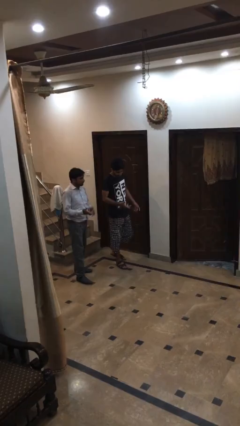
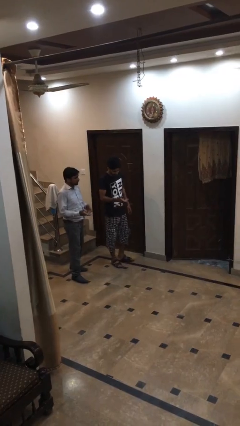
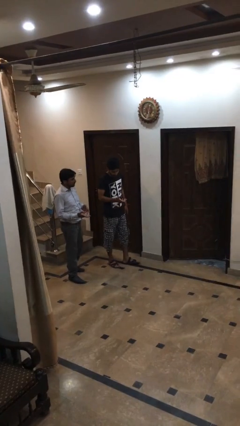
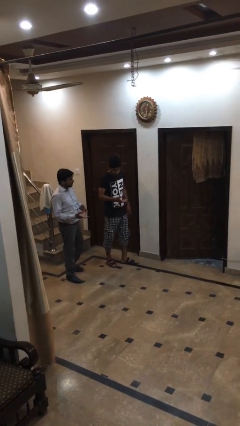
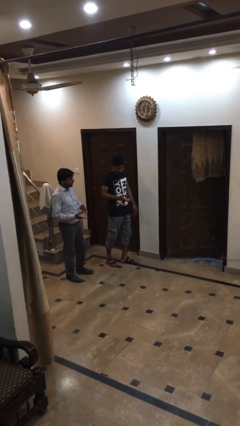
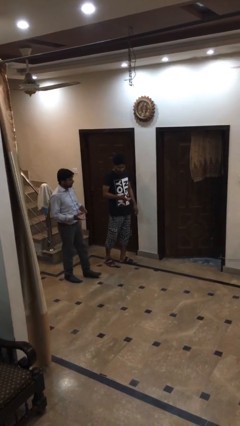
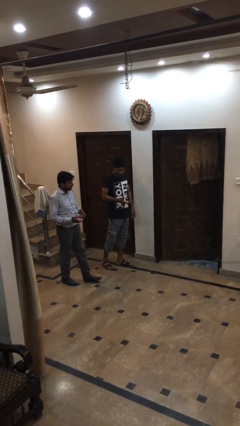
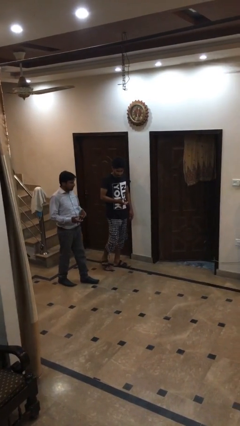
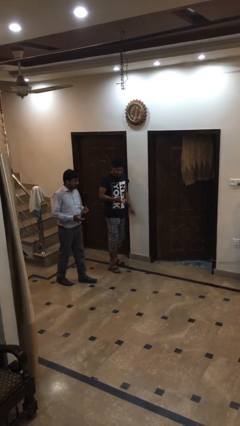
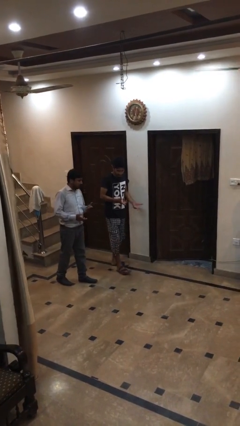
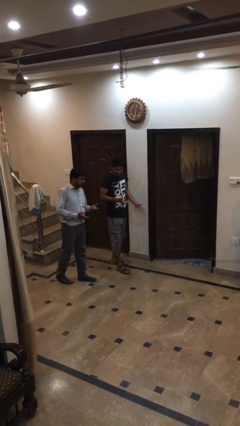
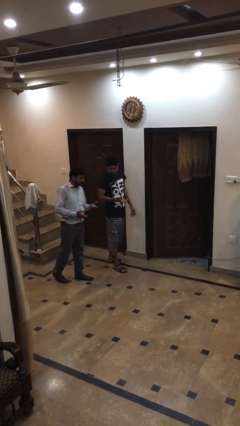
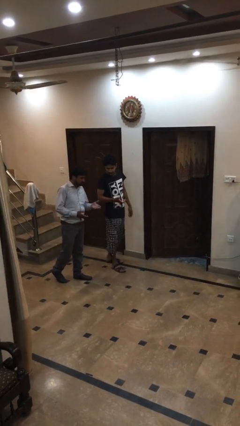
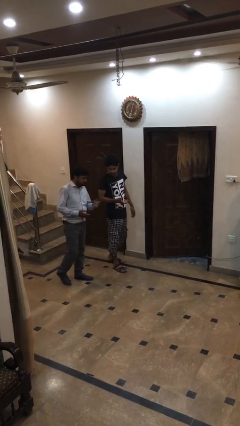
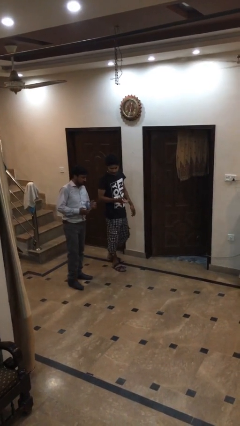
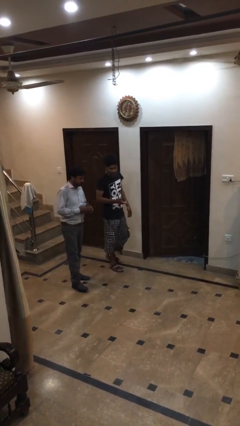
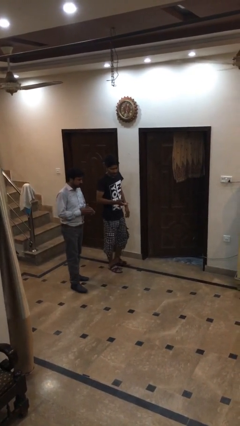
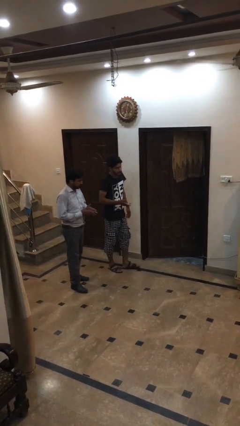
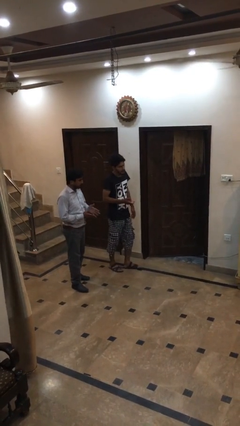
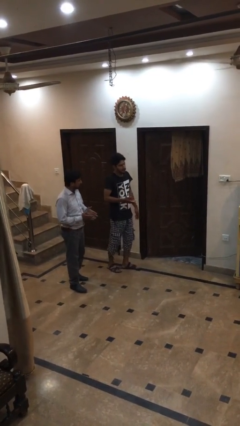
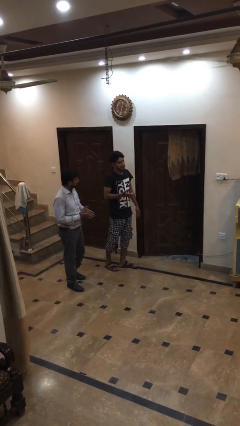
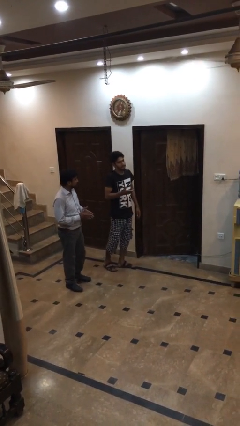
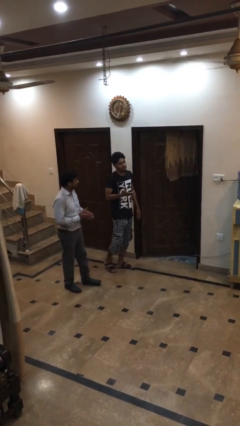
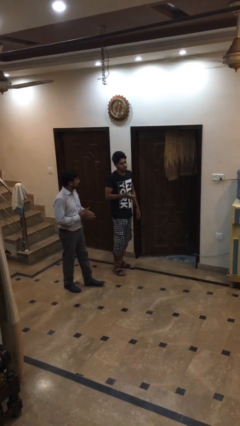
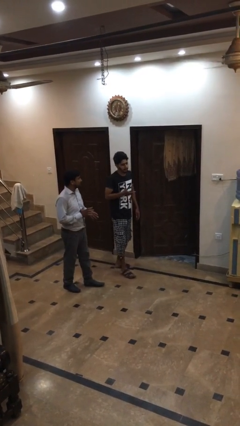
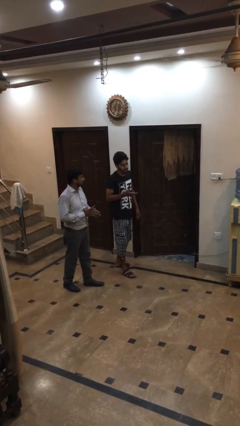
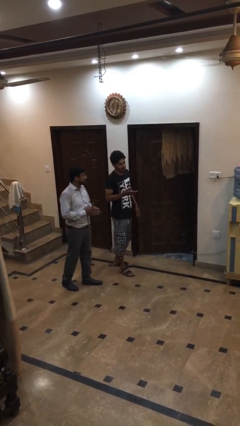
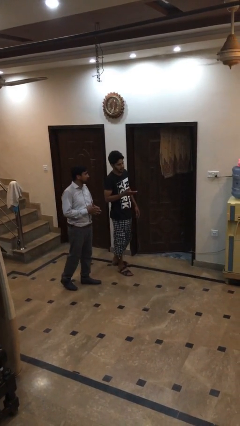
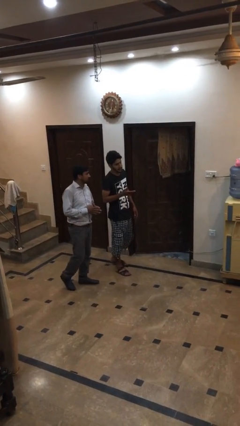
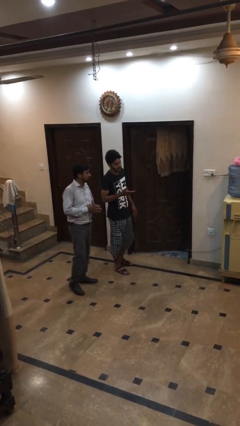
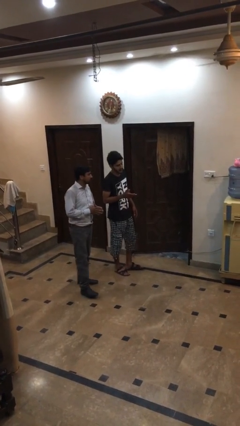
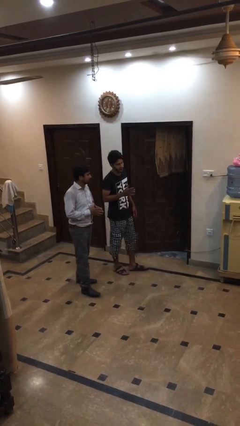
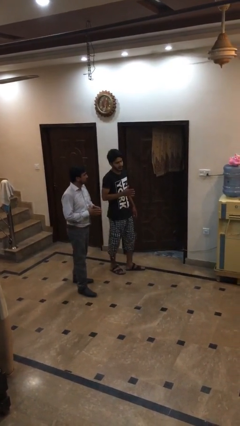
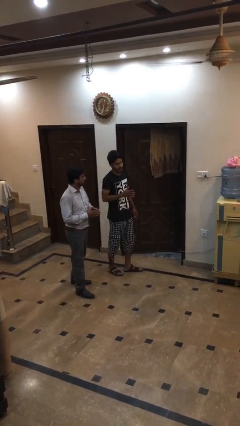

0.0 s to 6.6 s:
person talks to person

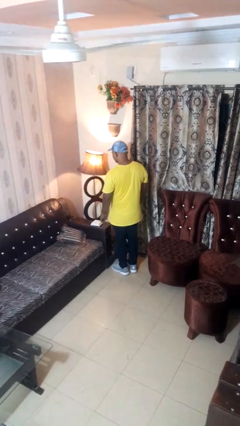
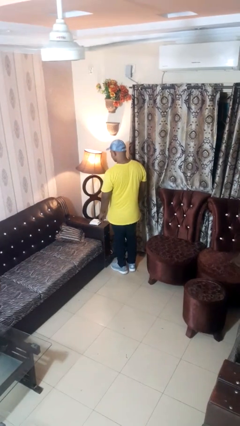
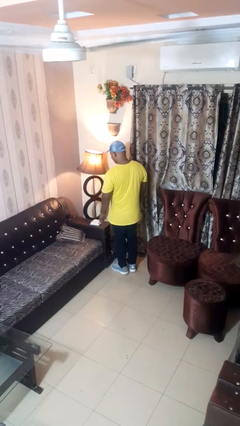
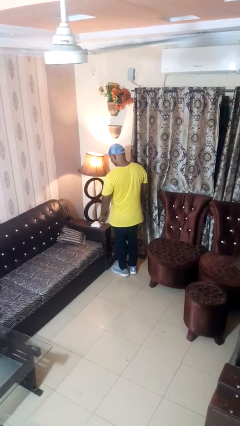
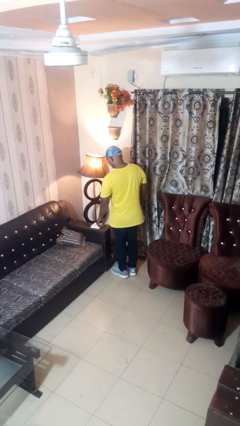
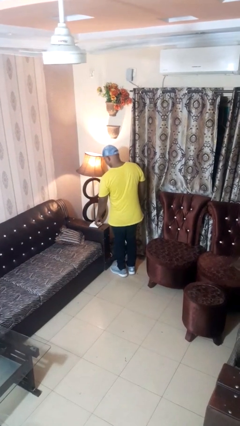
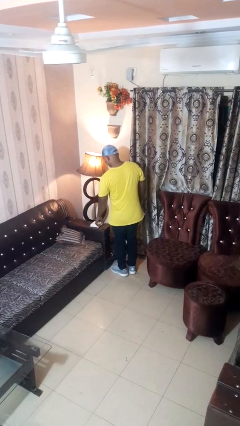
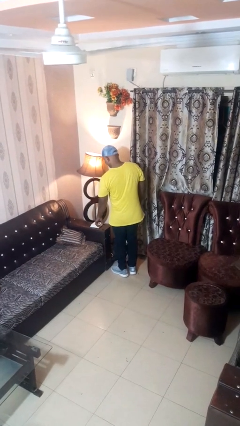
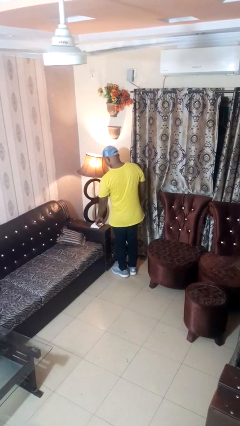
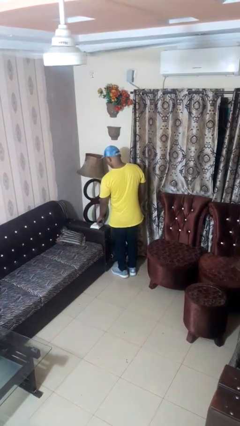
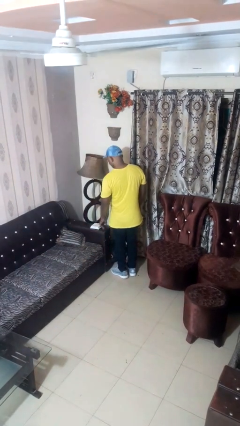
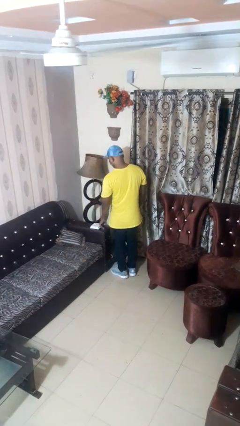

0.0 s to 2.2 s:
person turns off lamp

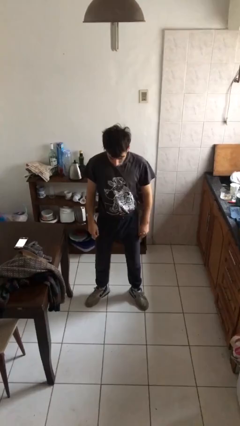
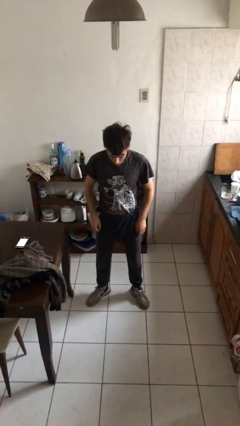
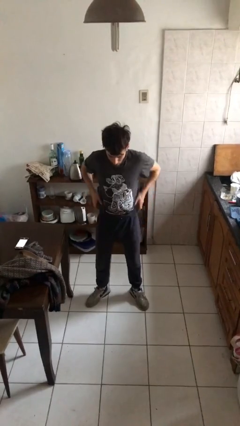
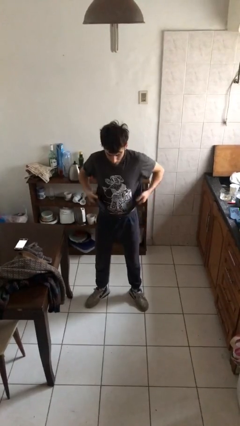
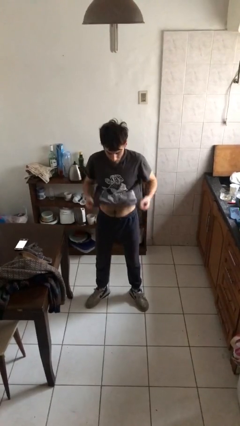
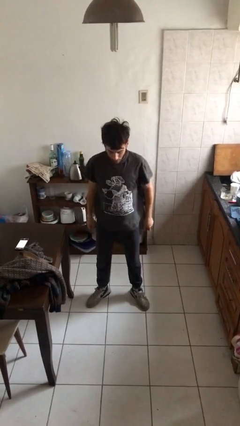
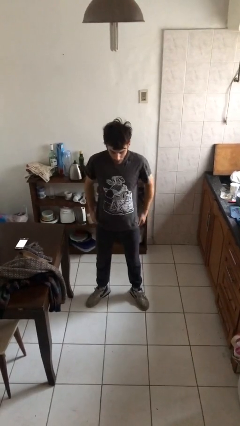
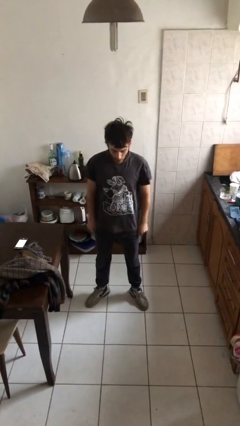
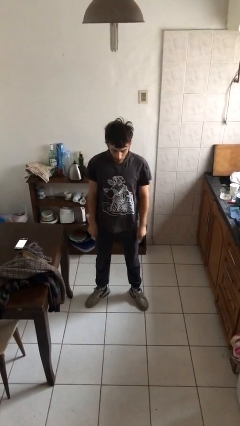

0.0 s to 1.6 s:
person untucks shirt

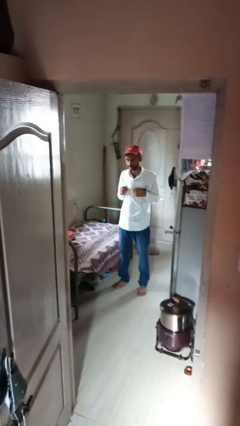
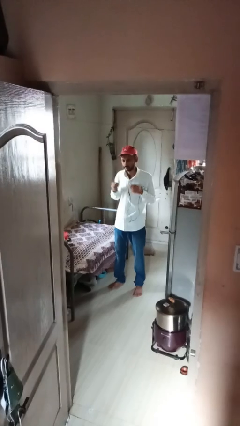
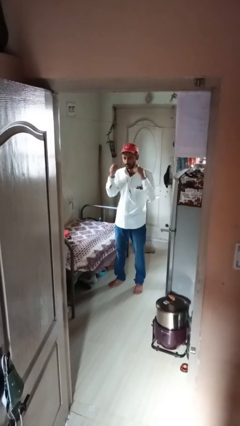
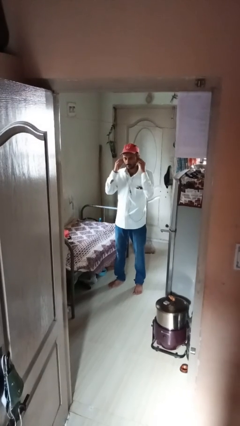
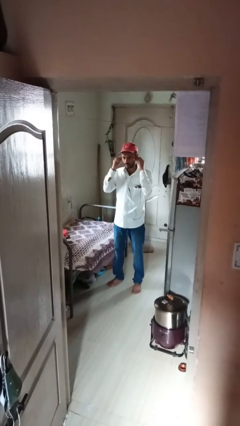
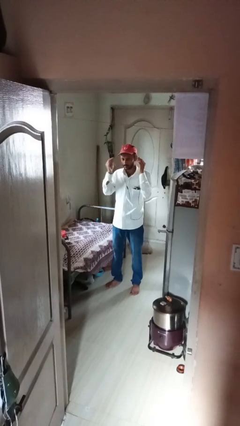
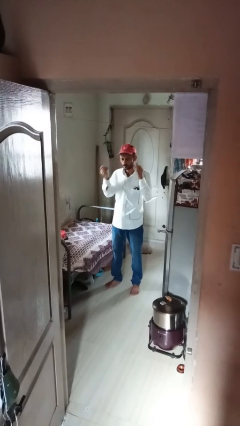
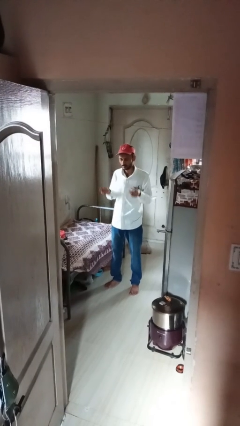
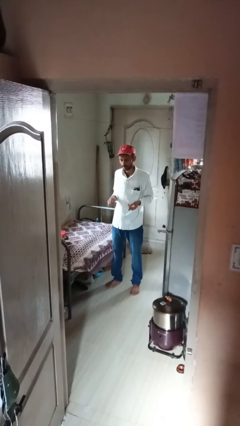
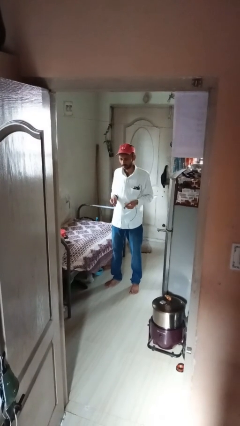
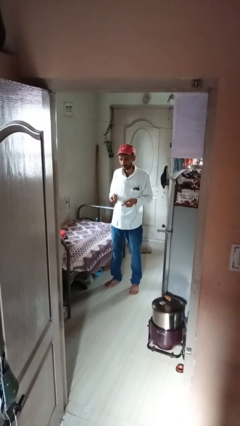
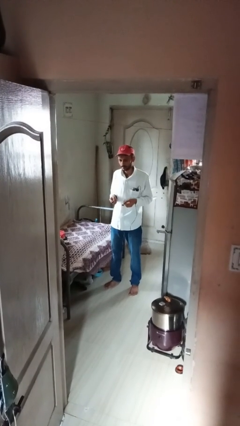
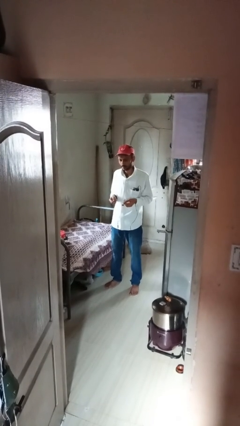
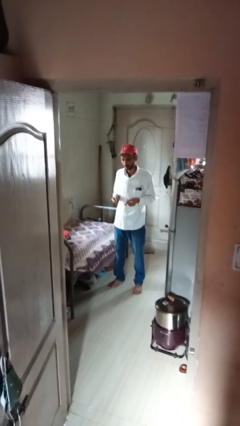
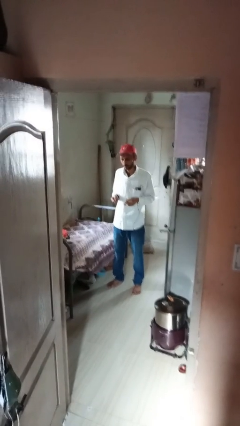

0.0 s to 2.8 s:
person takes off headphones

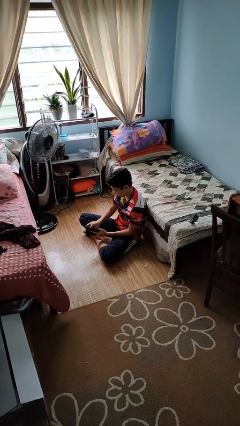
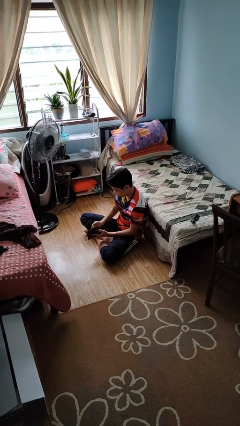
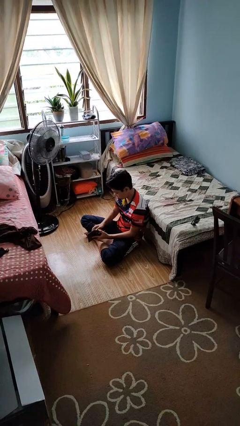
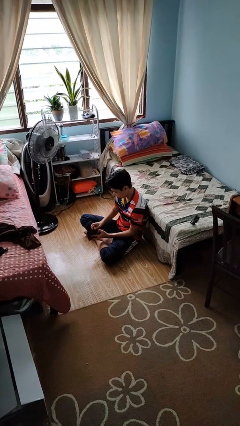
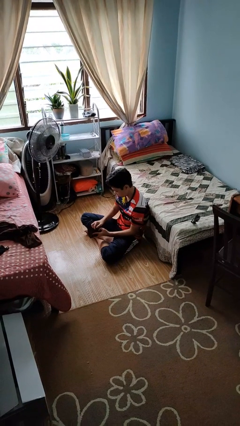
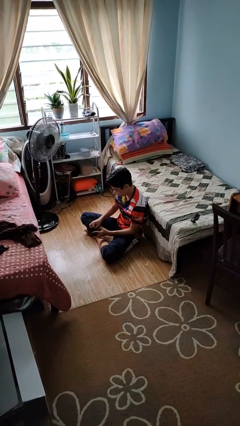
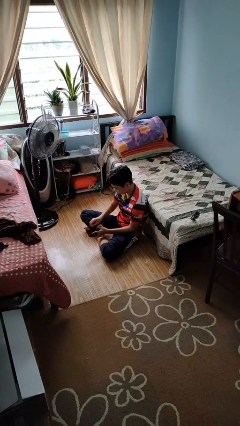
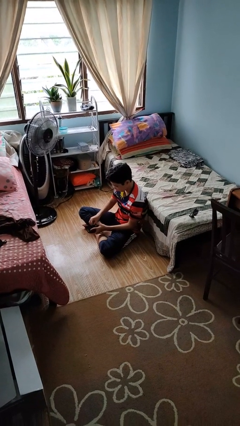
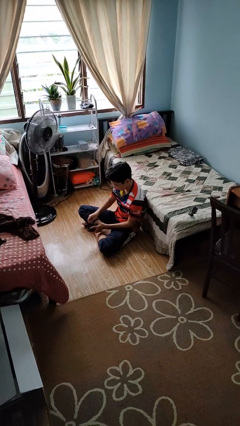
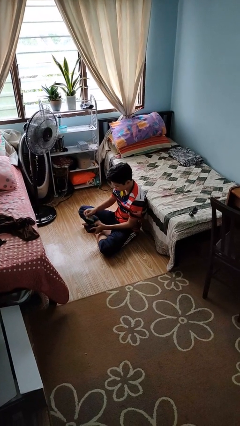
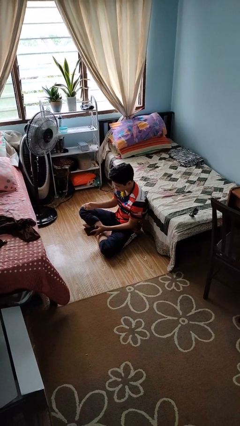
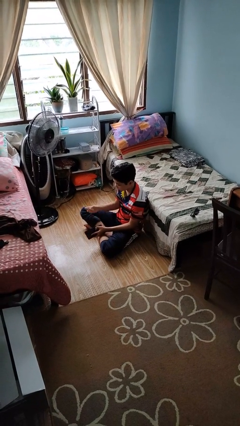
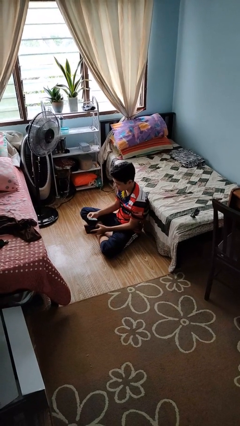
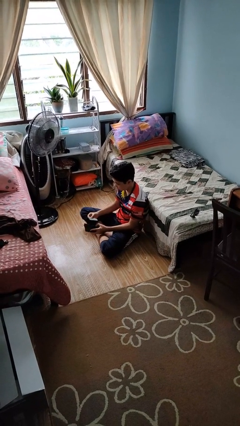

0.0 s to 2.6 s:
person takes object from purse

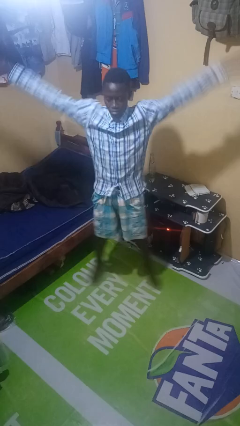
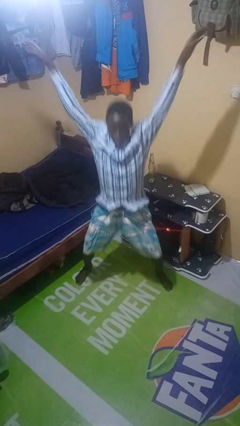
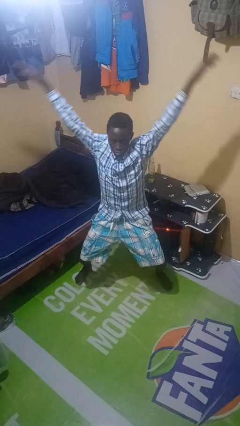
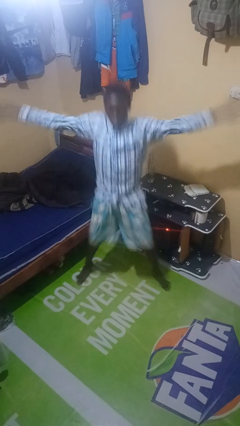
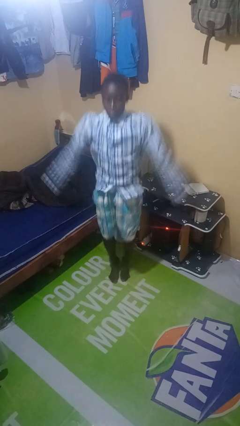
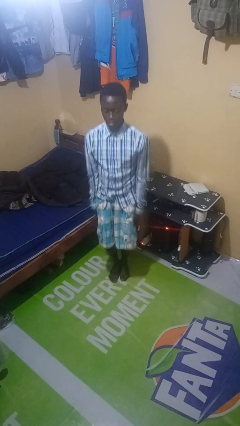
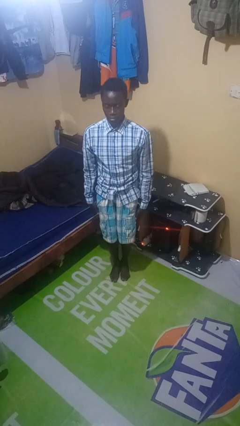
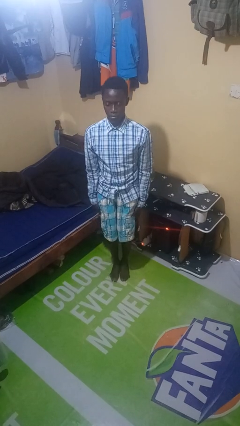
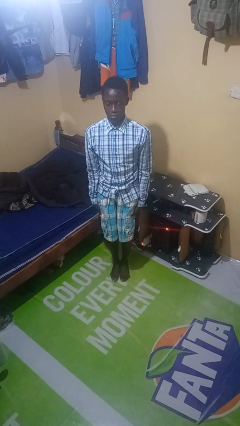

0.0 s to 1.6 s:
person exercises with jumping jacks
